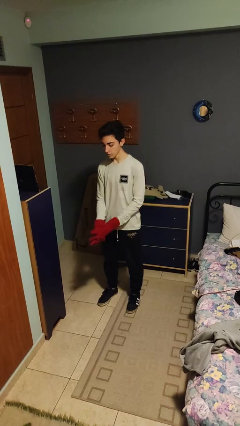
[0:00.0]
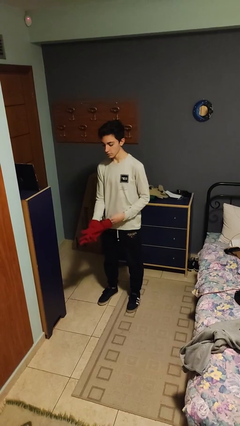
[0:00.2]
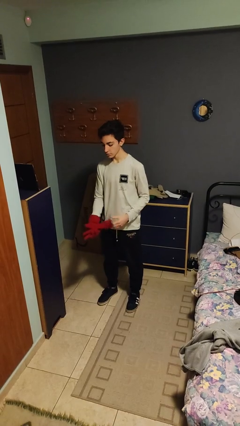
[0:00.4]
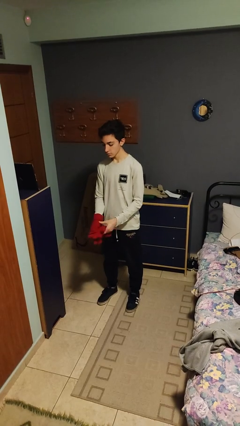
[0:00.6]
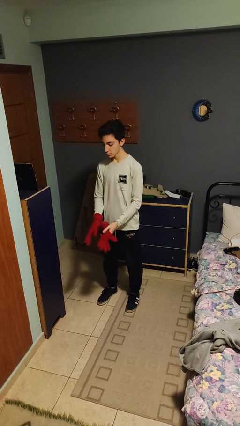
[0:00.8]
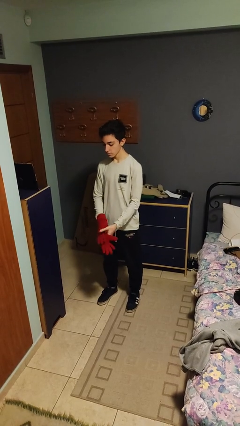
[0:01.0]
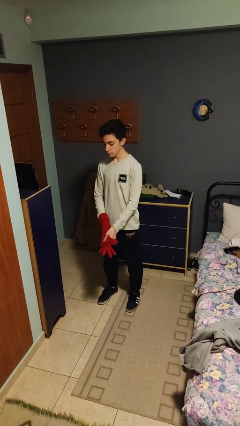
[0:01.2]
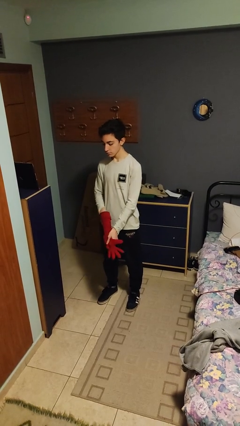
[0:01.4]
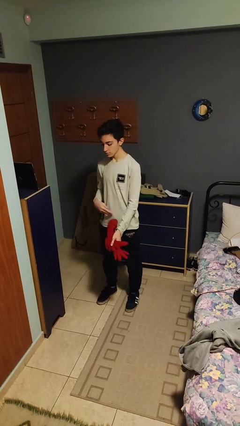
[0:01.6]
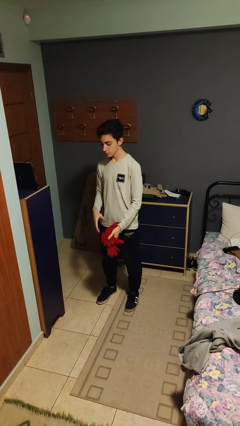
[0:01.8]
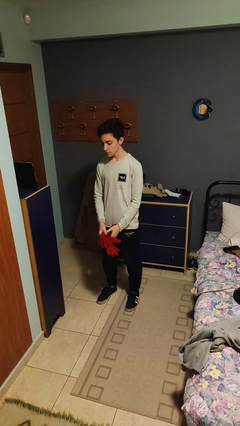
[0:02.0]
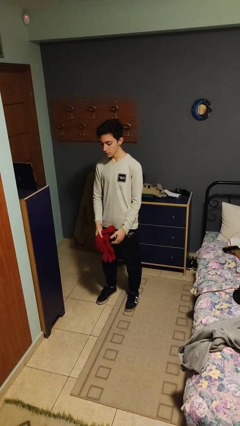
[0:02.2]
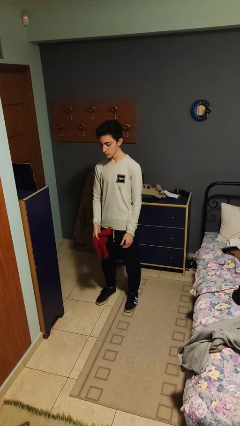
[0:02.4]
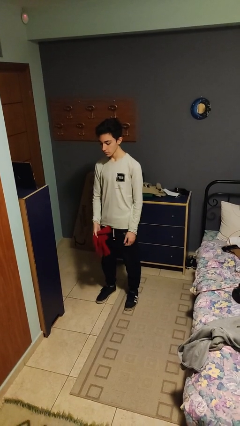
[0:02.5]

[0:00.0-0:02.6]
person takes off gloves

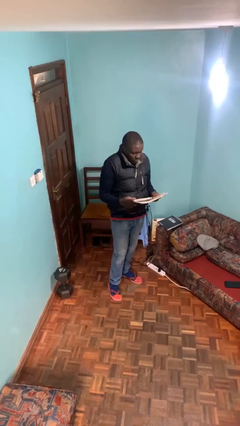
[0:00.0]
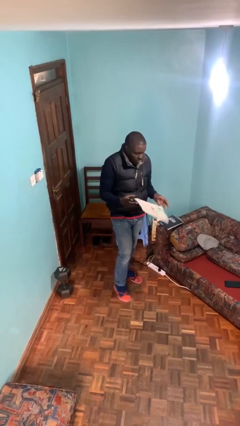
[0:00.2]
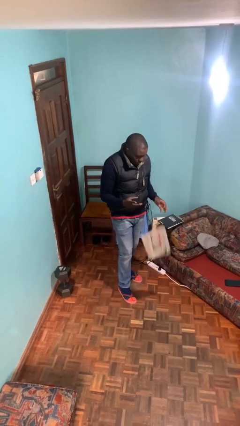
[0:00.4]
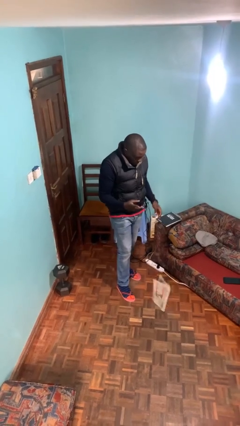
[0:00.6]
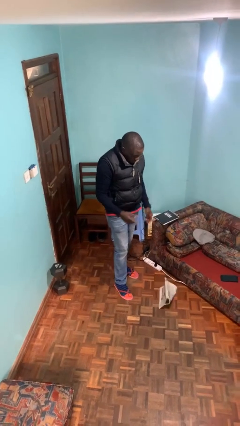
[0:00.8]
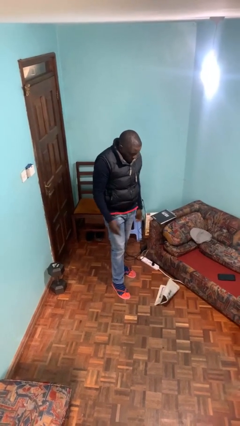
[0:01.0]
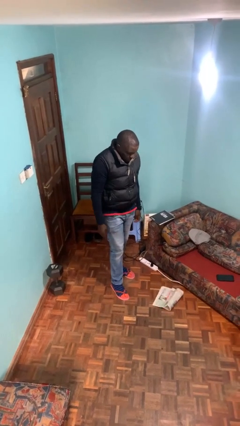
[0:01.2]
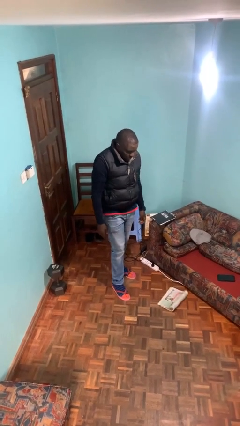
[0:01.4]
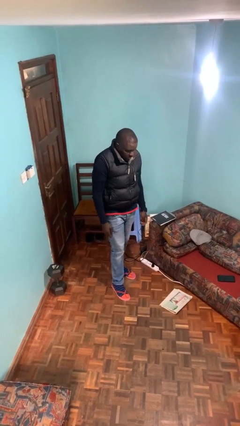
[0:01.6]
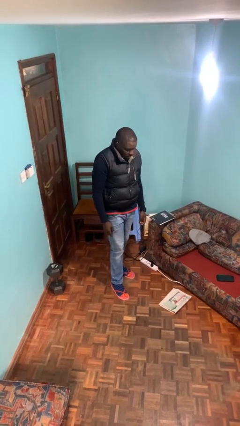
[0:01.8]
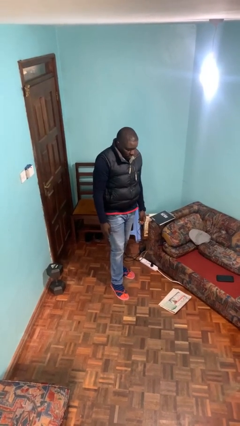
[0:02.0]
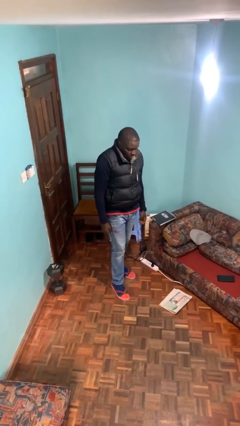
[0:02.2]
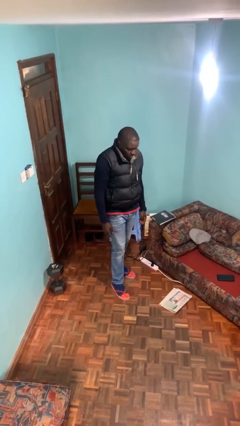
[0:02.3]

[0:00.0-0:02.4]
person drops object

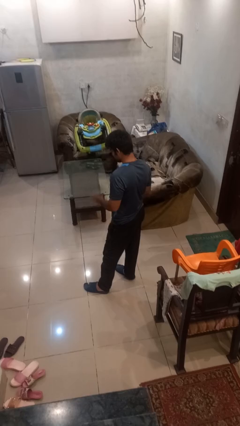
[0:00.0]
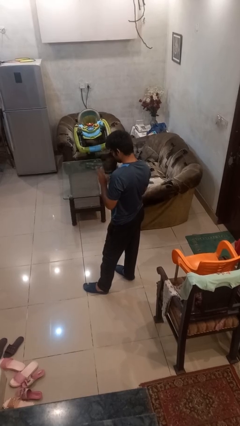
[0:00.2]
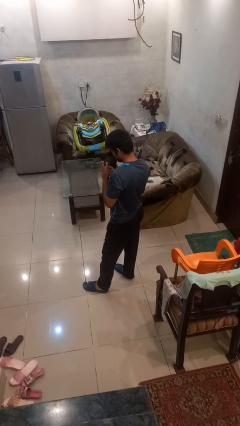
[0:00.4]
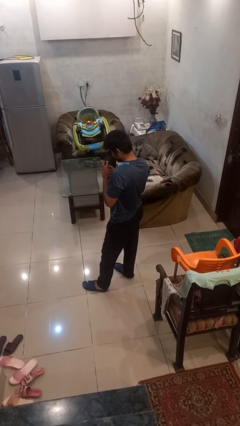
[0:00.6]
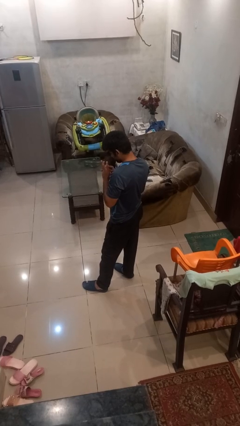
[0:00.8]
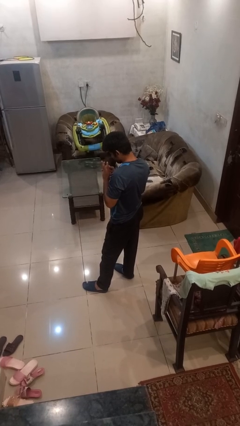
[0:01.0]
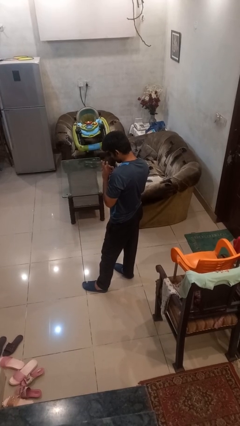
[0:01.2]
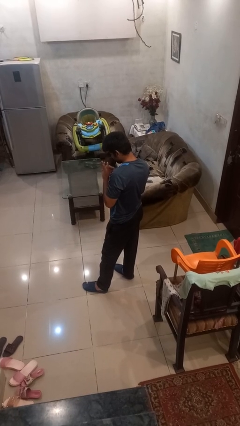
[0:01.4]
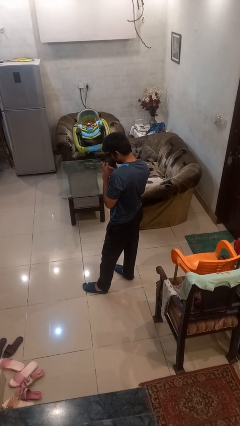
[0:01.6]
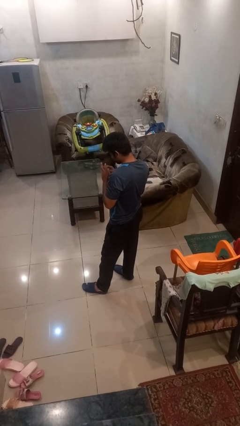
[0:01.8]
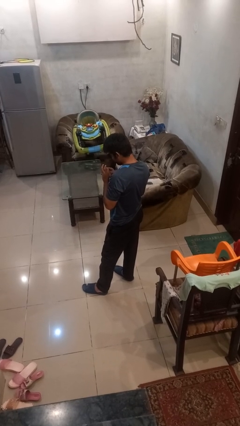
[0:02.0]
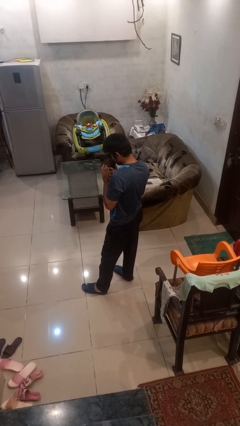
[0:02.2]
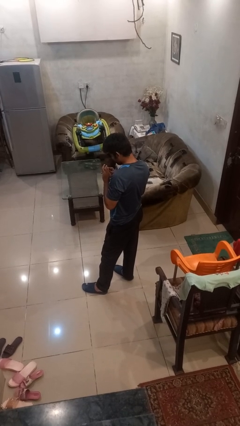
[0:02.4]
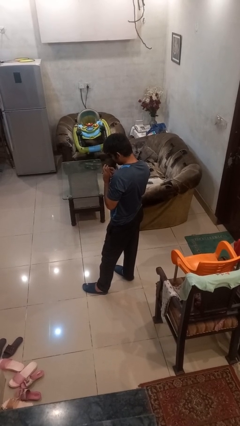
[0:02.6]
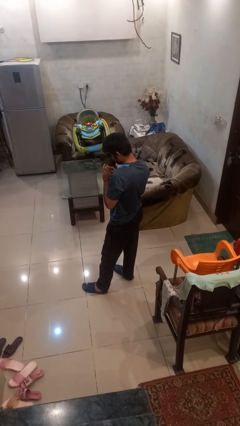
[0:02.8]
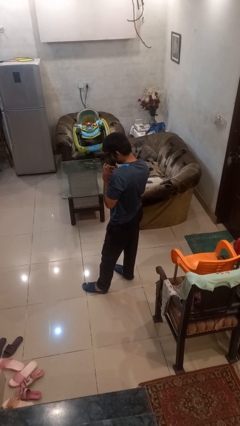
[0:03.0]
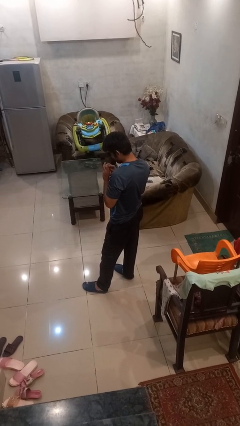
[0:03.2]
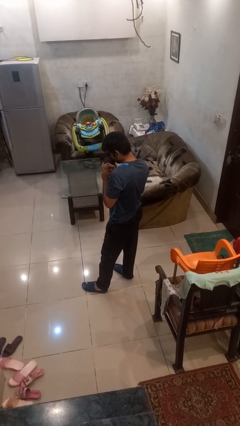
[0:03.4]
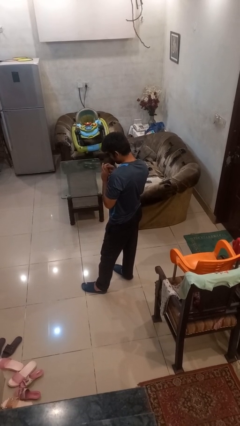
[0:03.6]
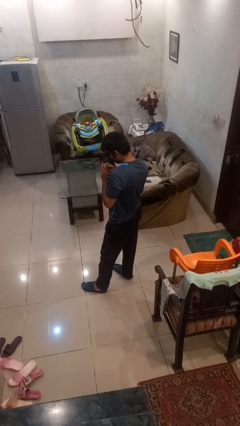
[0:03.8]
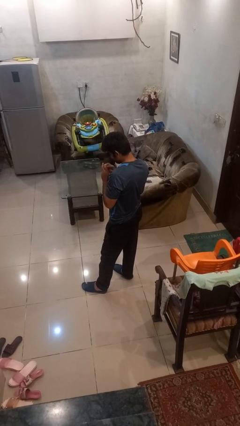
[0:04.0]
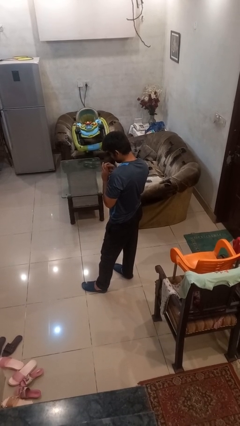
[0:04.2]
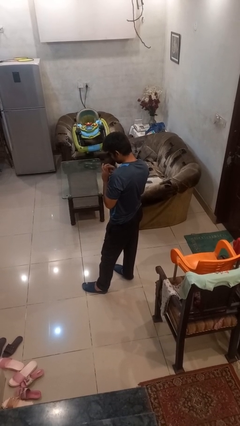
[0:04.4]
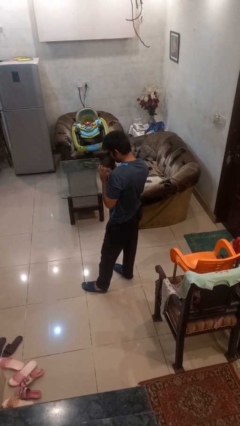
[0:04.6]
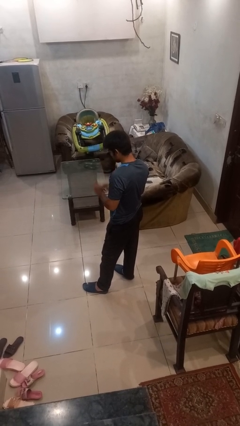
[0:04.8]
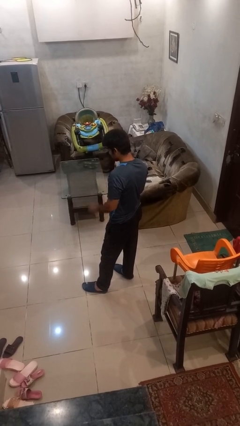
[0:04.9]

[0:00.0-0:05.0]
person files fingernails

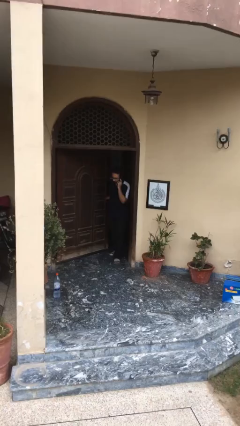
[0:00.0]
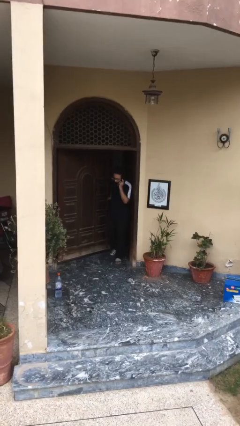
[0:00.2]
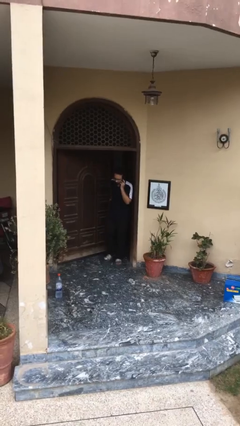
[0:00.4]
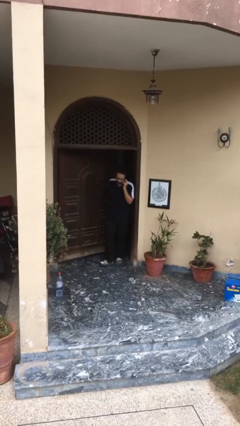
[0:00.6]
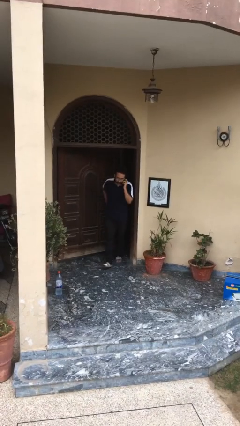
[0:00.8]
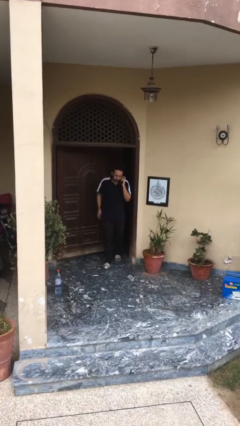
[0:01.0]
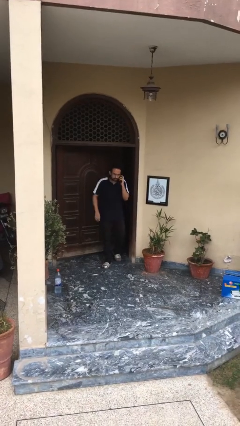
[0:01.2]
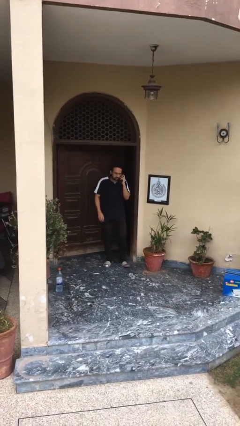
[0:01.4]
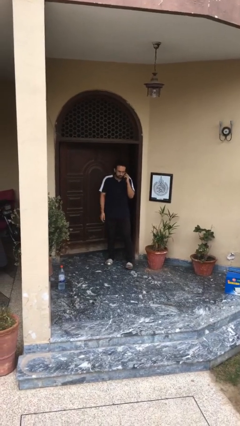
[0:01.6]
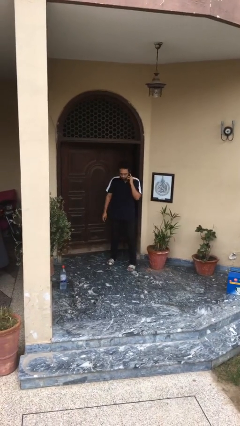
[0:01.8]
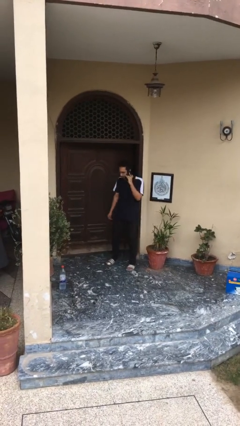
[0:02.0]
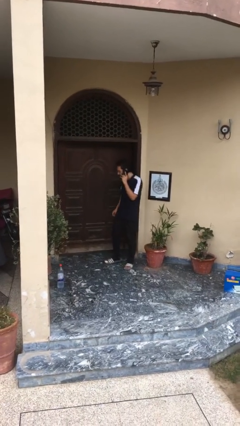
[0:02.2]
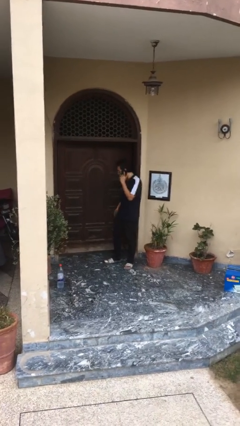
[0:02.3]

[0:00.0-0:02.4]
person enters scene through structure

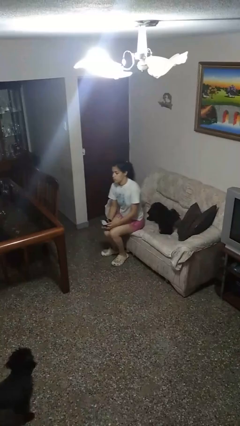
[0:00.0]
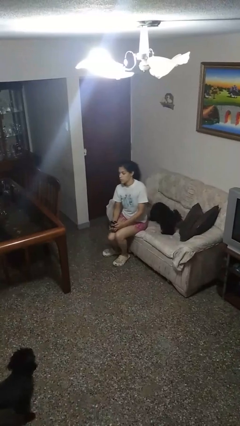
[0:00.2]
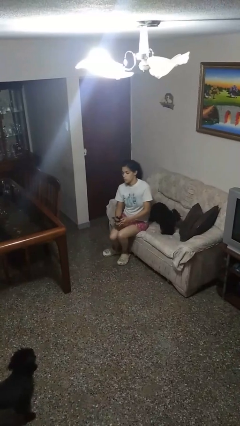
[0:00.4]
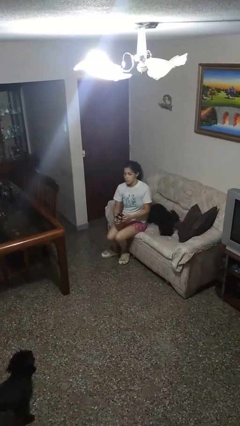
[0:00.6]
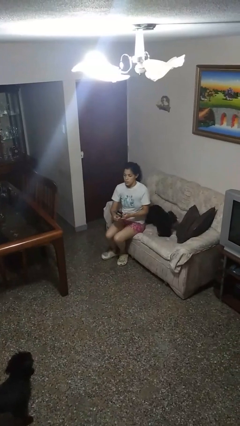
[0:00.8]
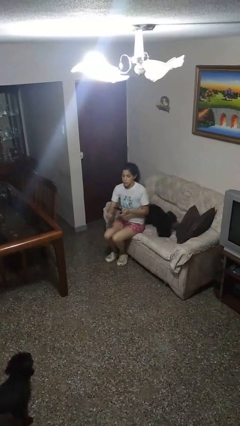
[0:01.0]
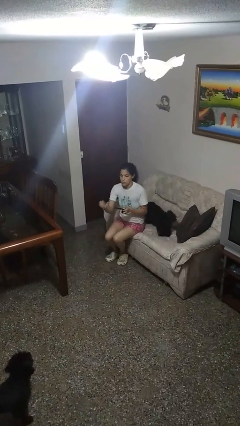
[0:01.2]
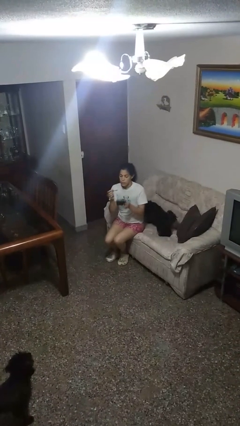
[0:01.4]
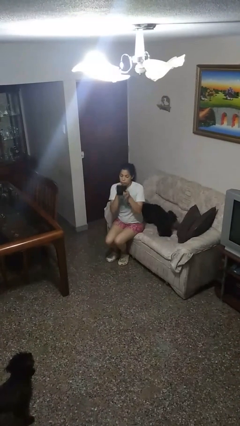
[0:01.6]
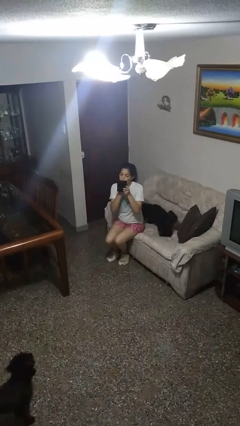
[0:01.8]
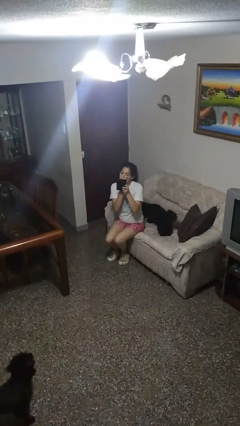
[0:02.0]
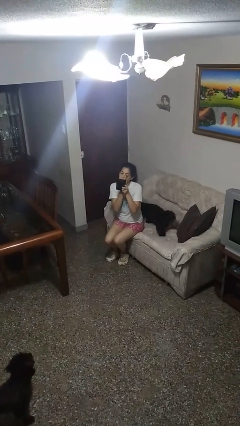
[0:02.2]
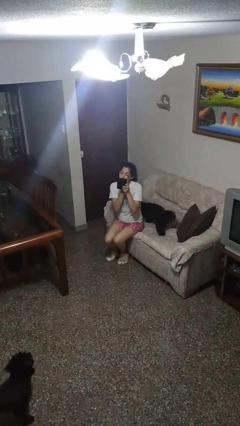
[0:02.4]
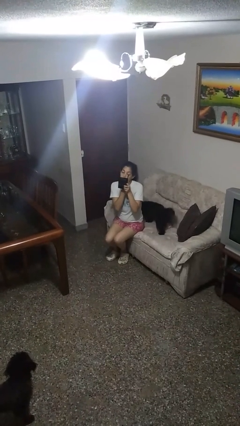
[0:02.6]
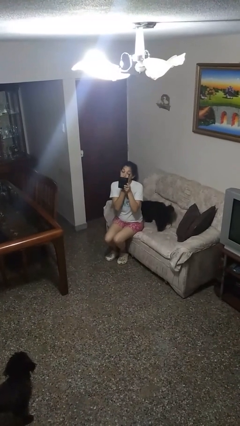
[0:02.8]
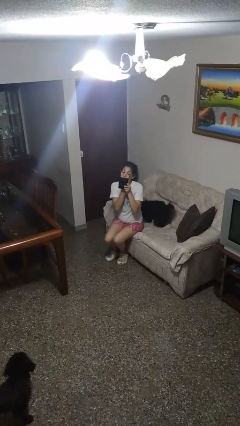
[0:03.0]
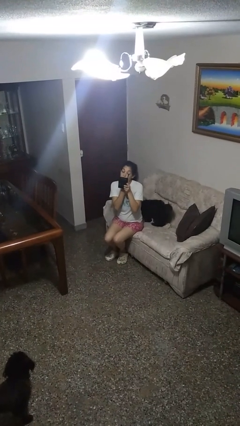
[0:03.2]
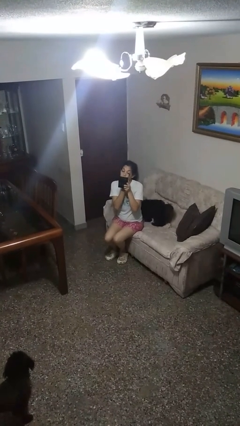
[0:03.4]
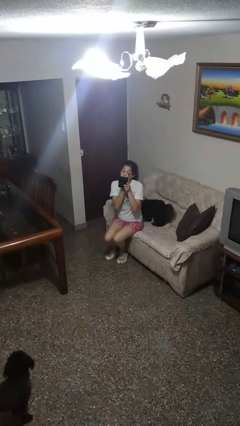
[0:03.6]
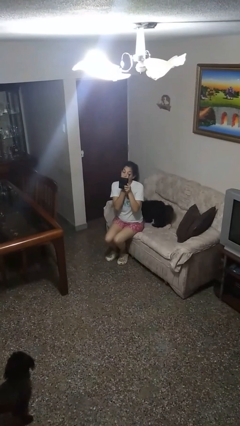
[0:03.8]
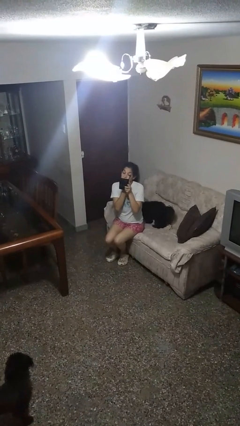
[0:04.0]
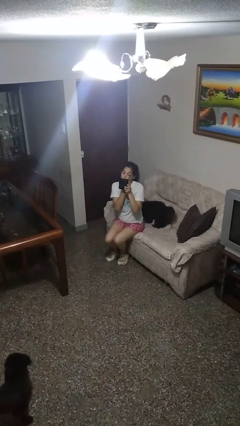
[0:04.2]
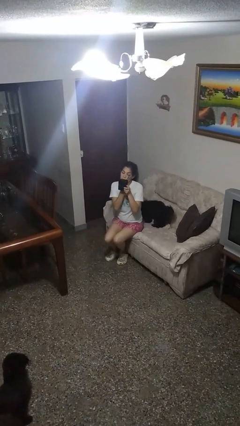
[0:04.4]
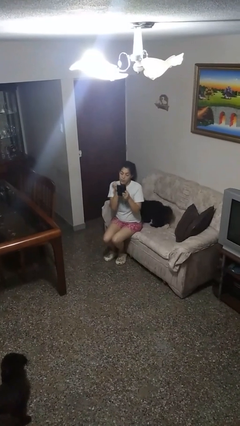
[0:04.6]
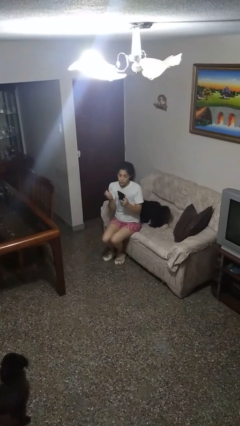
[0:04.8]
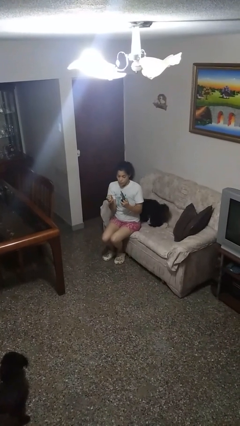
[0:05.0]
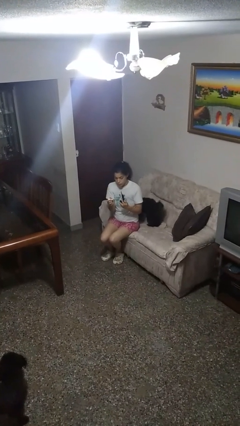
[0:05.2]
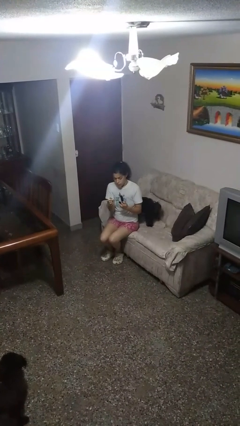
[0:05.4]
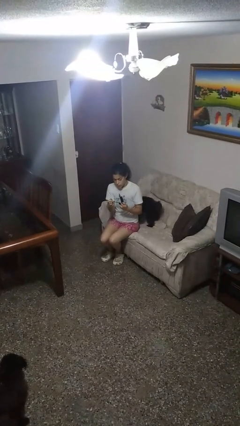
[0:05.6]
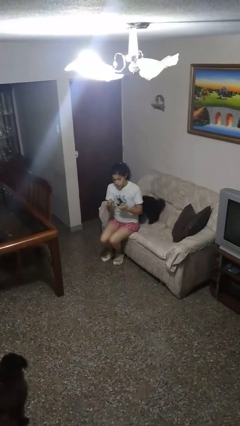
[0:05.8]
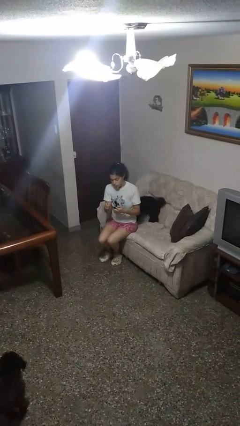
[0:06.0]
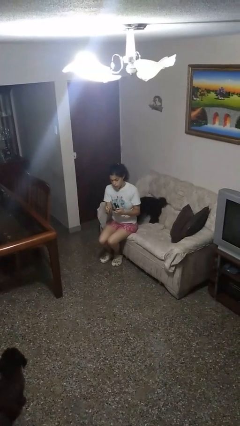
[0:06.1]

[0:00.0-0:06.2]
person applies eye makeup
